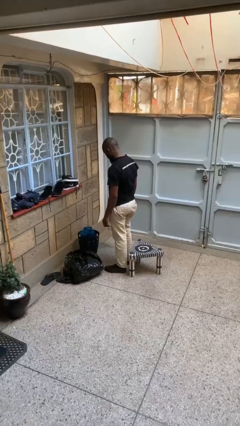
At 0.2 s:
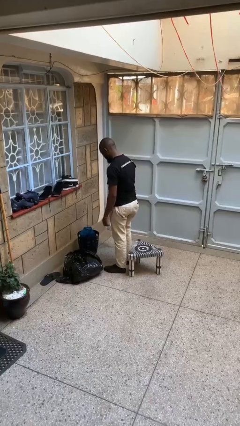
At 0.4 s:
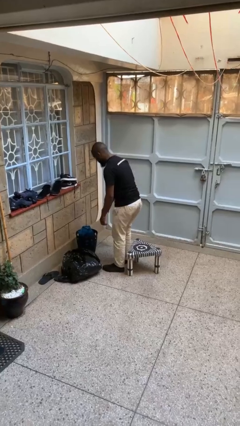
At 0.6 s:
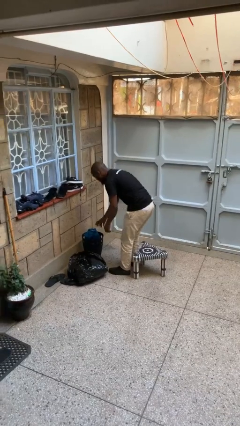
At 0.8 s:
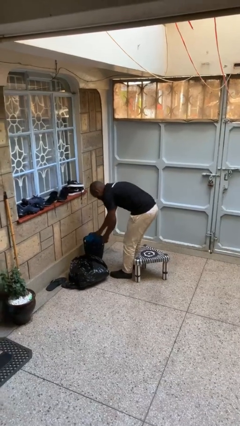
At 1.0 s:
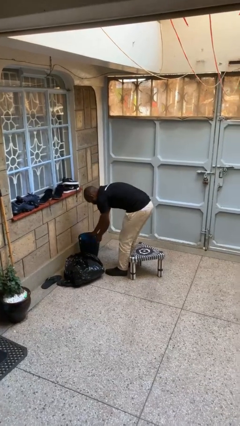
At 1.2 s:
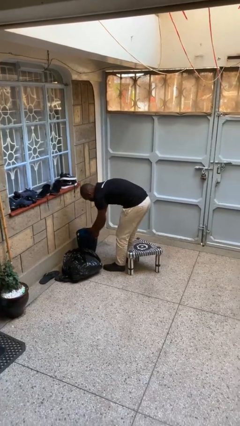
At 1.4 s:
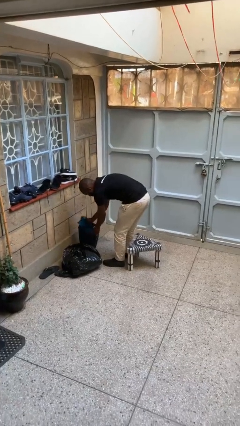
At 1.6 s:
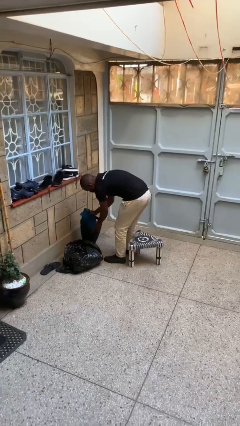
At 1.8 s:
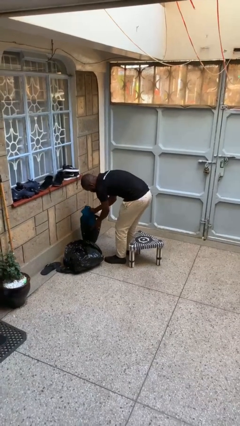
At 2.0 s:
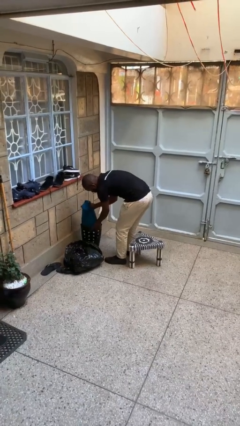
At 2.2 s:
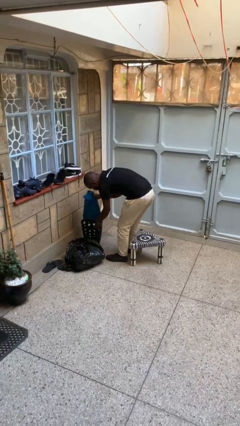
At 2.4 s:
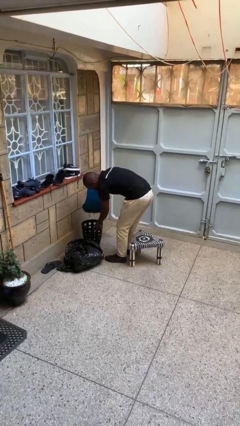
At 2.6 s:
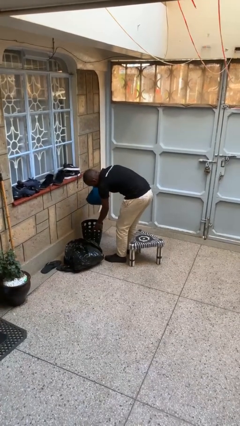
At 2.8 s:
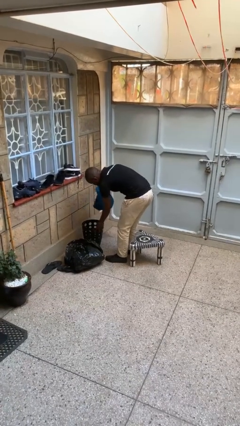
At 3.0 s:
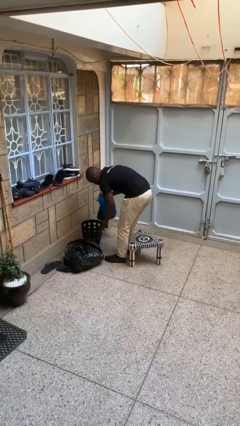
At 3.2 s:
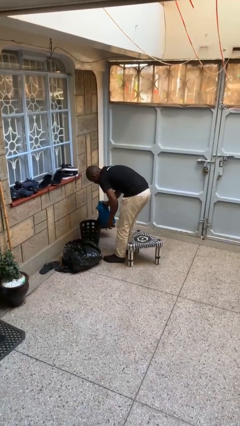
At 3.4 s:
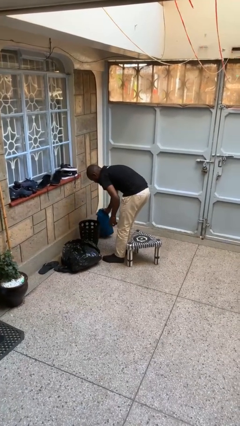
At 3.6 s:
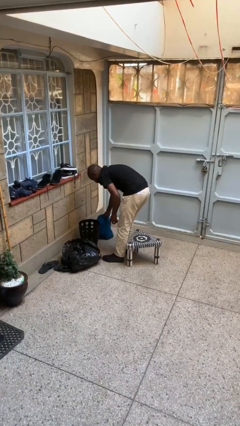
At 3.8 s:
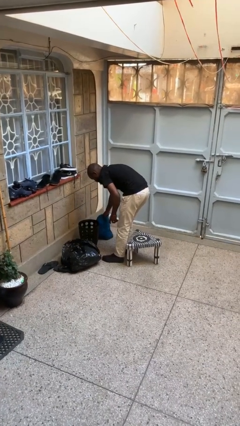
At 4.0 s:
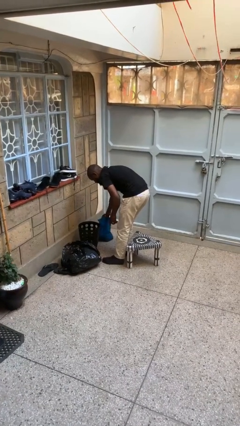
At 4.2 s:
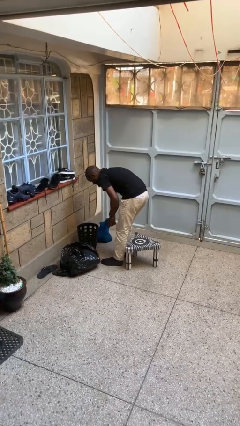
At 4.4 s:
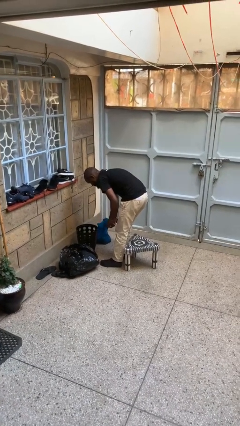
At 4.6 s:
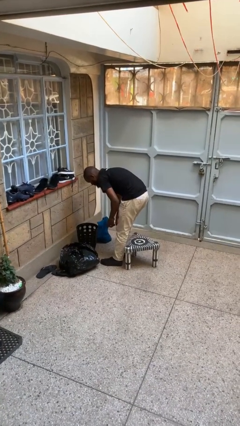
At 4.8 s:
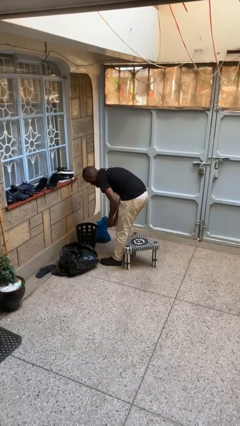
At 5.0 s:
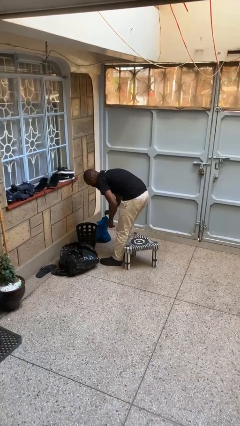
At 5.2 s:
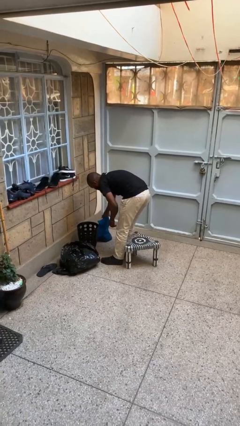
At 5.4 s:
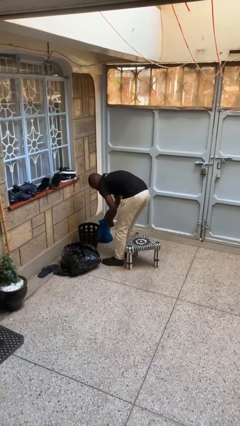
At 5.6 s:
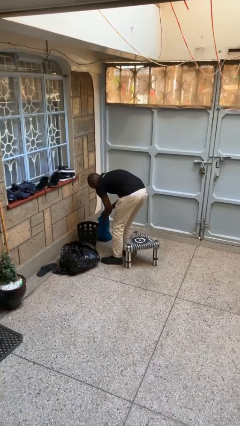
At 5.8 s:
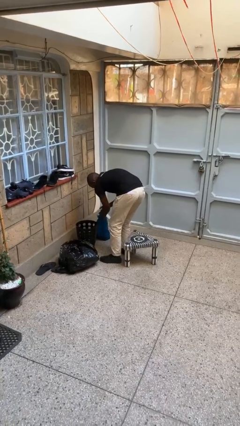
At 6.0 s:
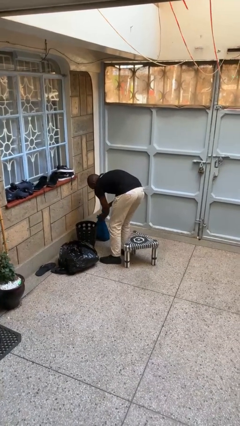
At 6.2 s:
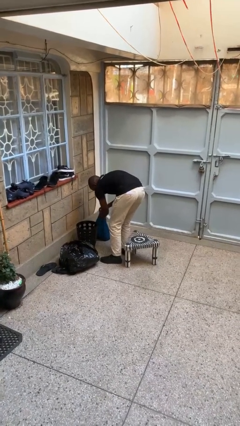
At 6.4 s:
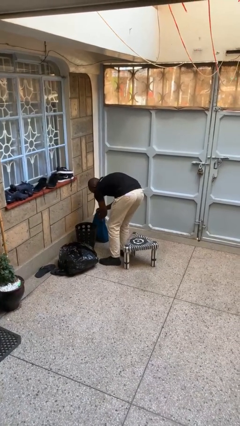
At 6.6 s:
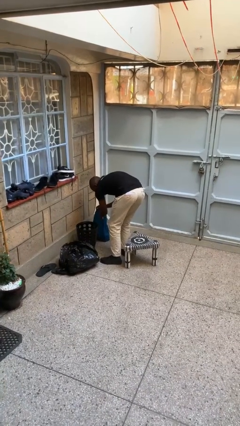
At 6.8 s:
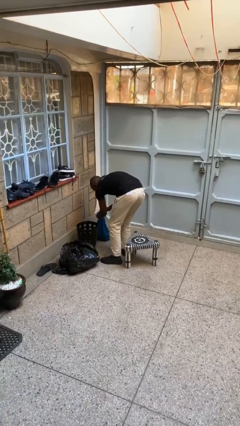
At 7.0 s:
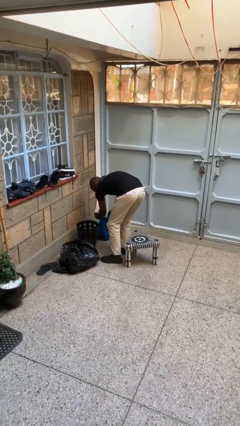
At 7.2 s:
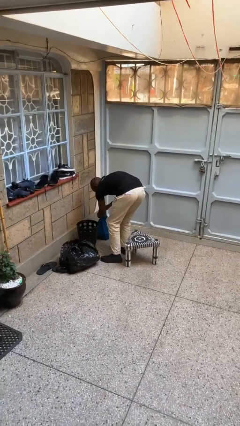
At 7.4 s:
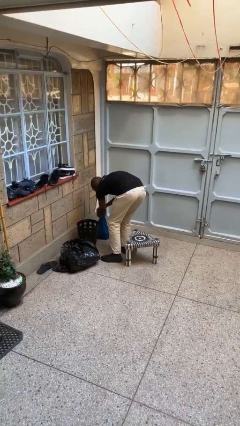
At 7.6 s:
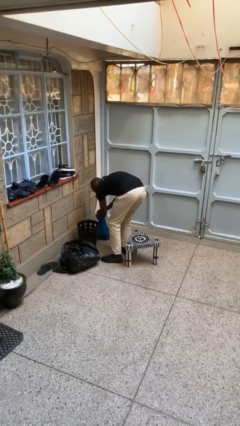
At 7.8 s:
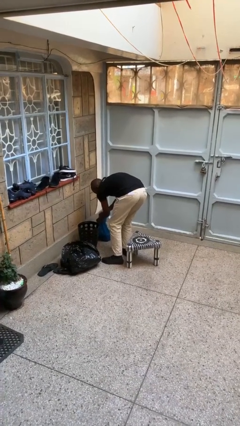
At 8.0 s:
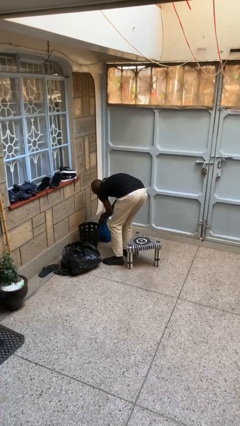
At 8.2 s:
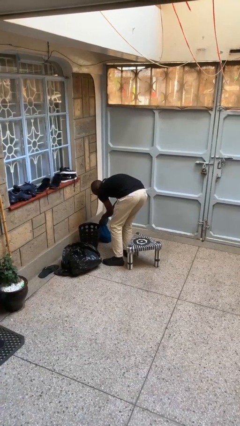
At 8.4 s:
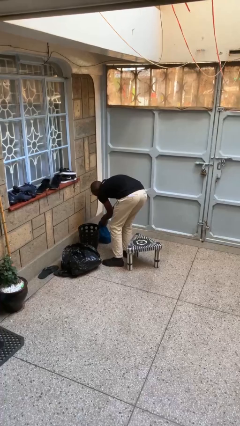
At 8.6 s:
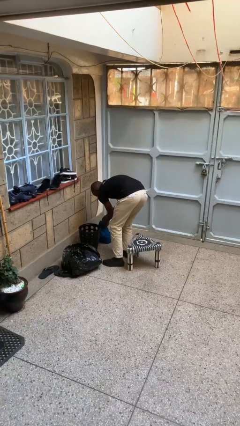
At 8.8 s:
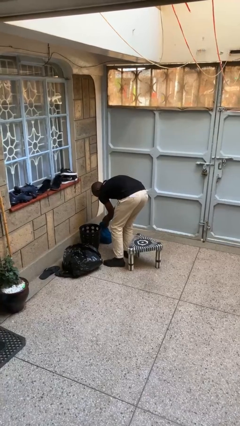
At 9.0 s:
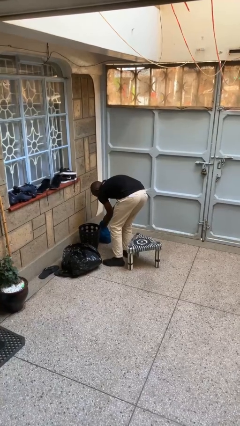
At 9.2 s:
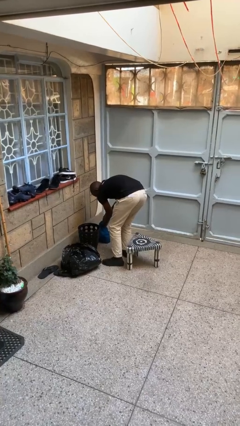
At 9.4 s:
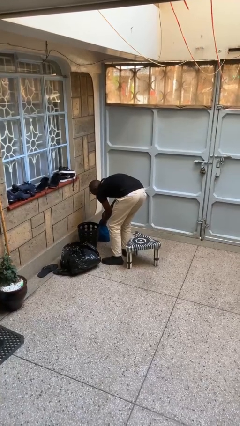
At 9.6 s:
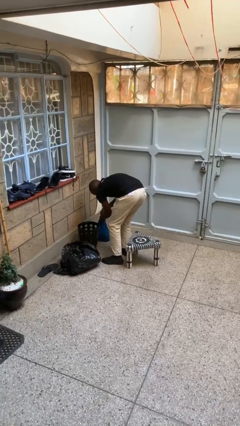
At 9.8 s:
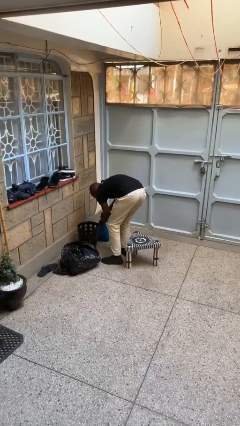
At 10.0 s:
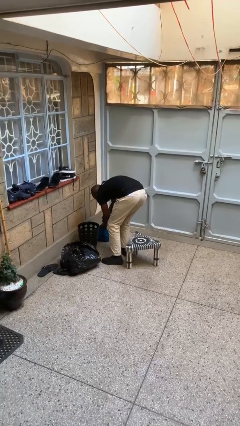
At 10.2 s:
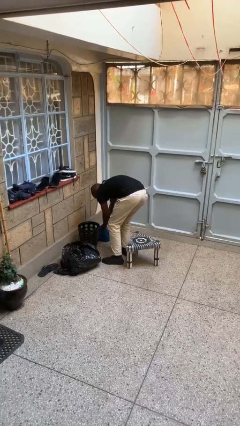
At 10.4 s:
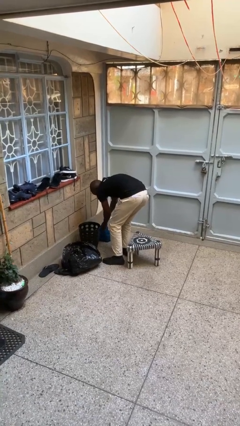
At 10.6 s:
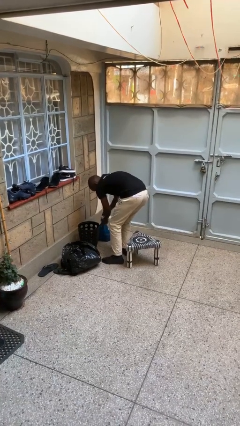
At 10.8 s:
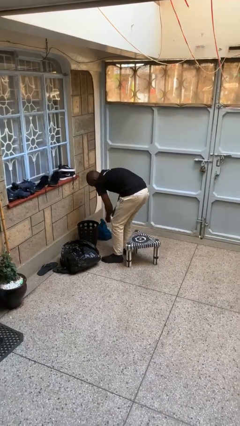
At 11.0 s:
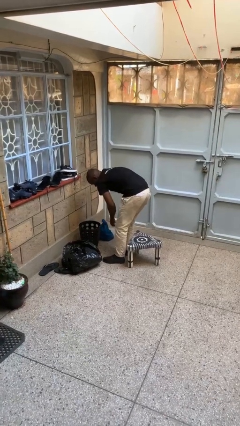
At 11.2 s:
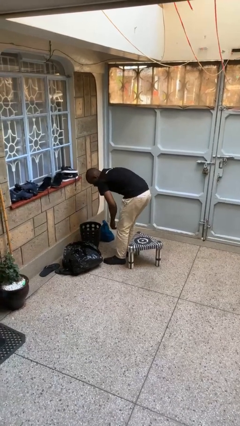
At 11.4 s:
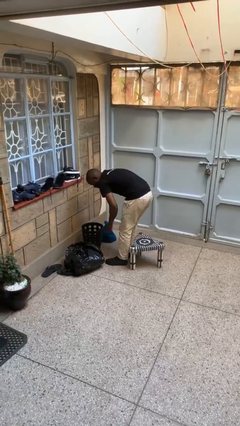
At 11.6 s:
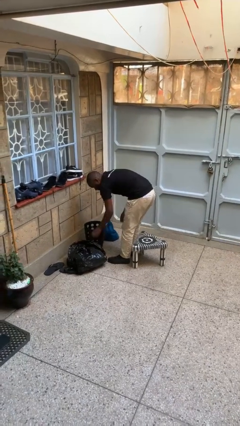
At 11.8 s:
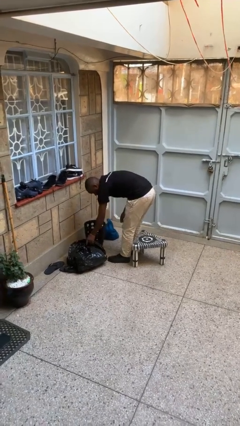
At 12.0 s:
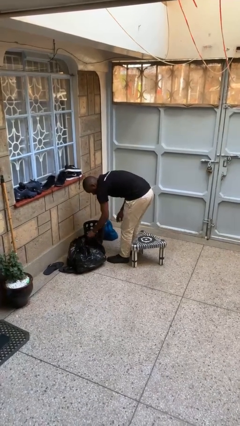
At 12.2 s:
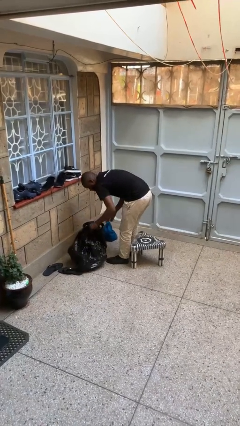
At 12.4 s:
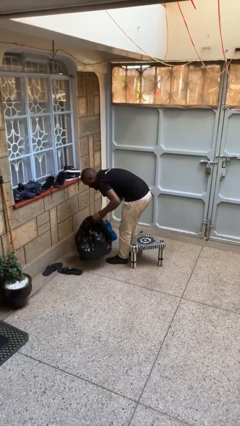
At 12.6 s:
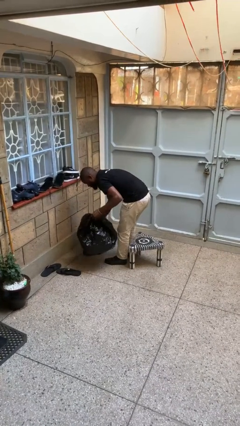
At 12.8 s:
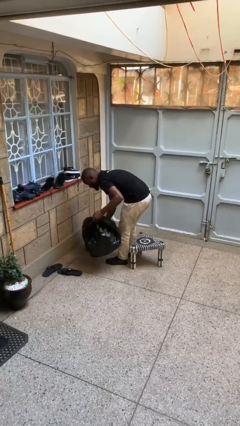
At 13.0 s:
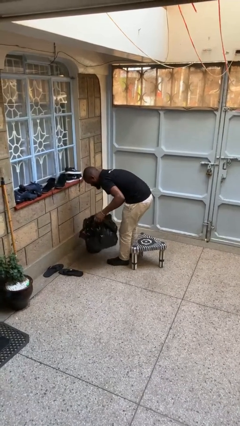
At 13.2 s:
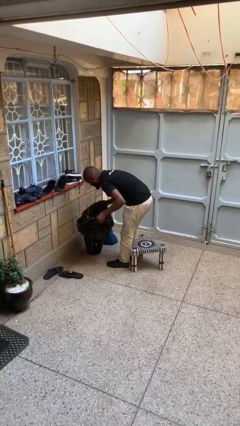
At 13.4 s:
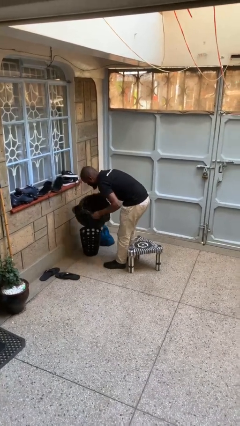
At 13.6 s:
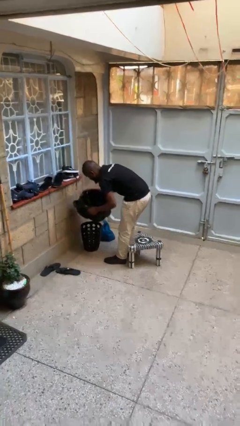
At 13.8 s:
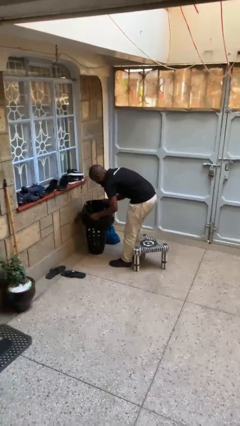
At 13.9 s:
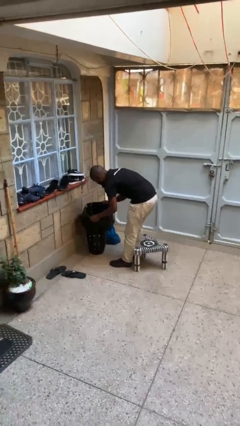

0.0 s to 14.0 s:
person removes trashbag from trashcan

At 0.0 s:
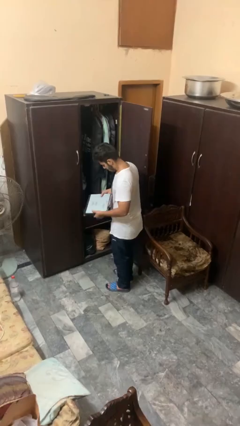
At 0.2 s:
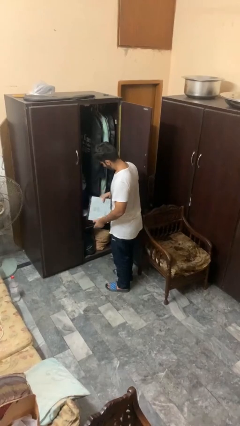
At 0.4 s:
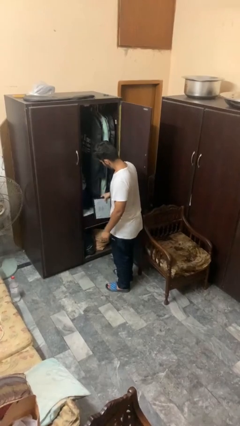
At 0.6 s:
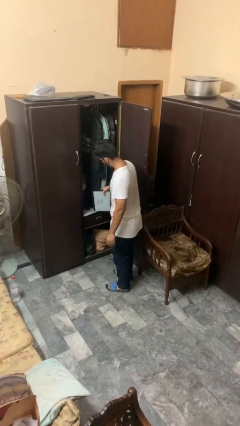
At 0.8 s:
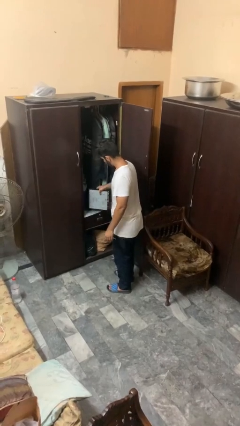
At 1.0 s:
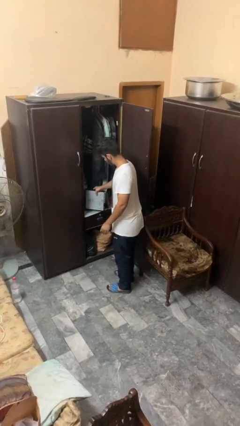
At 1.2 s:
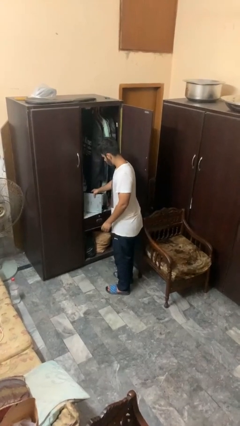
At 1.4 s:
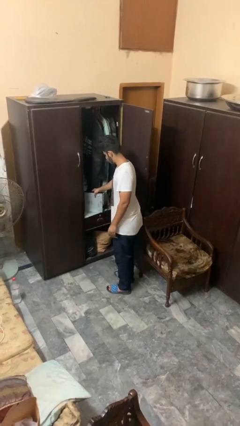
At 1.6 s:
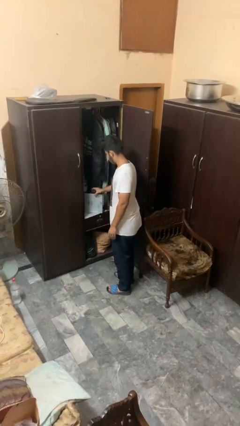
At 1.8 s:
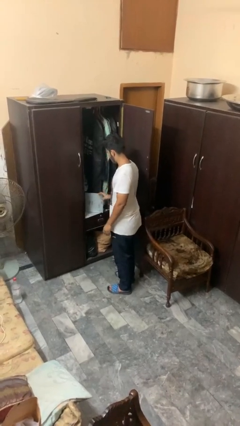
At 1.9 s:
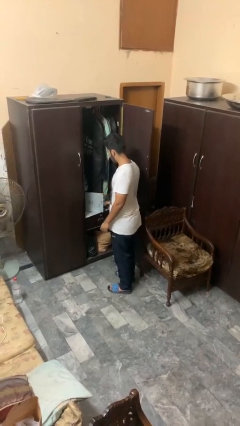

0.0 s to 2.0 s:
person puts down object into cabinet

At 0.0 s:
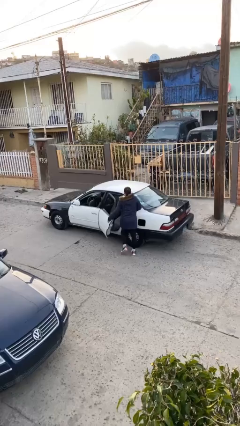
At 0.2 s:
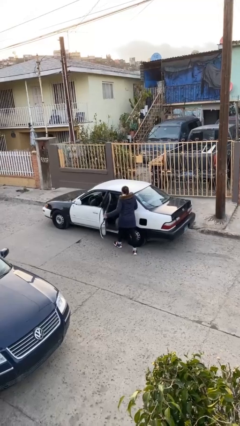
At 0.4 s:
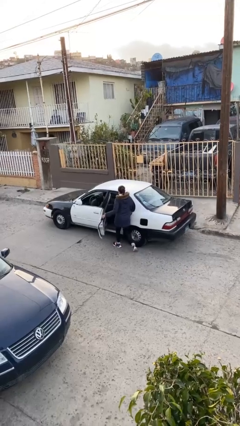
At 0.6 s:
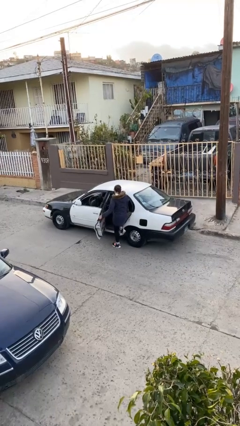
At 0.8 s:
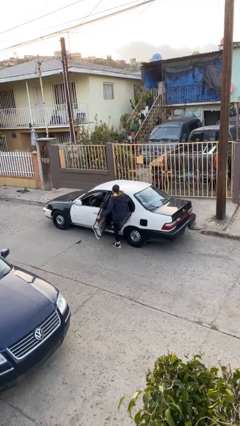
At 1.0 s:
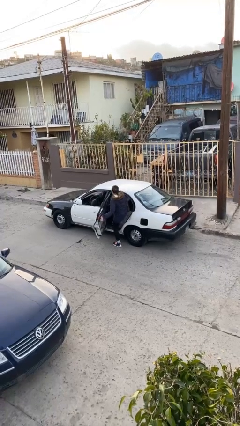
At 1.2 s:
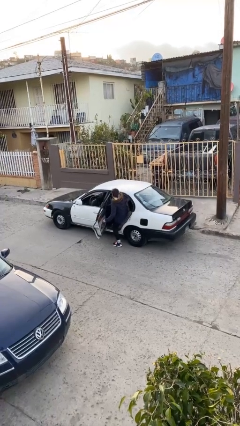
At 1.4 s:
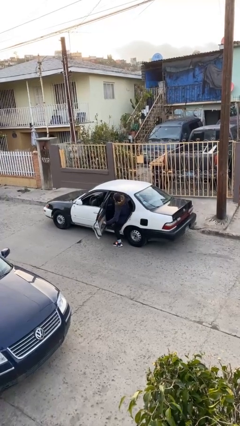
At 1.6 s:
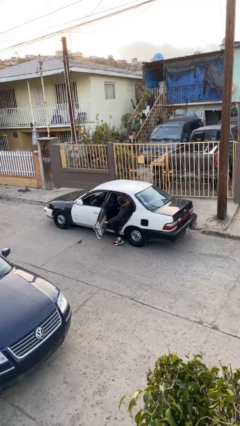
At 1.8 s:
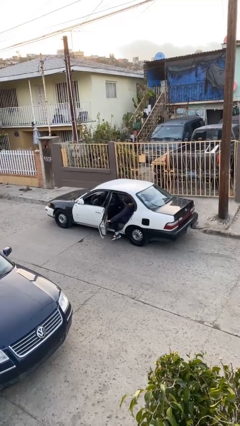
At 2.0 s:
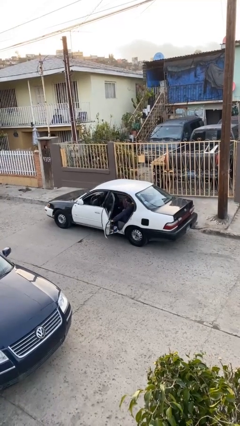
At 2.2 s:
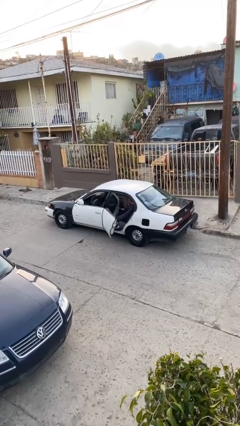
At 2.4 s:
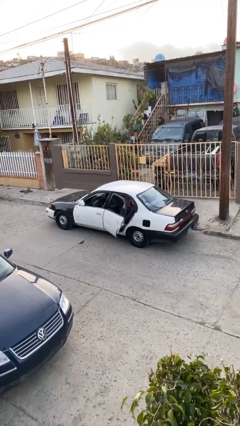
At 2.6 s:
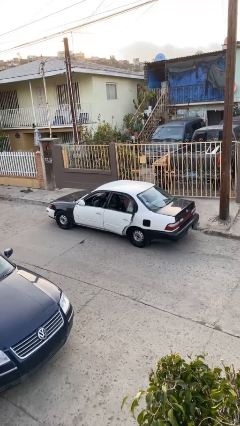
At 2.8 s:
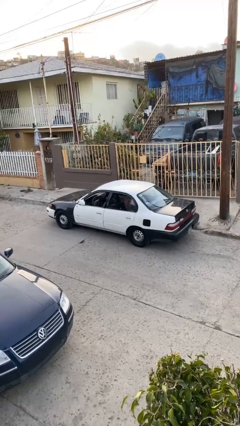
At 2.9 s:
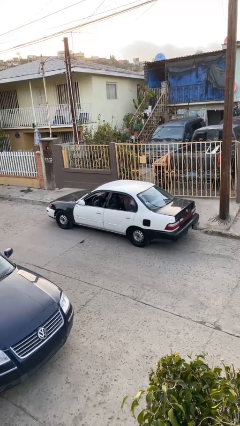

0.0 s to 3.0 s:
car picks up person
